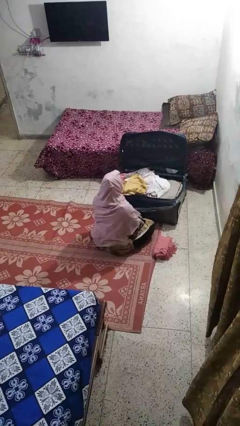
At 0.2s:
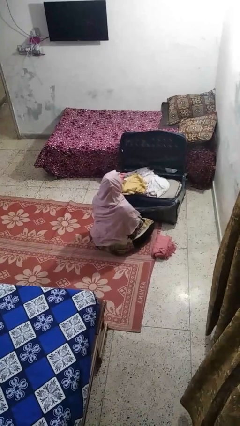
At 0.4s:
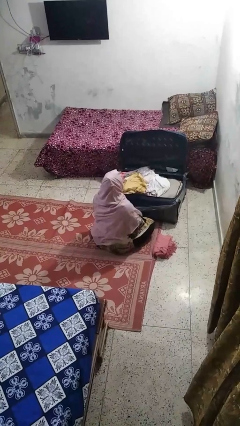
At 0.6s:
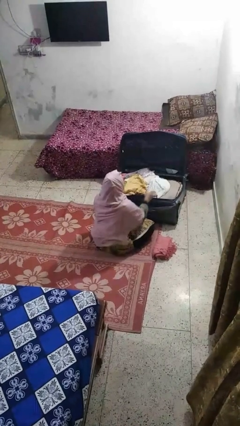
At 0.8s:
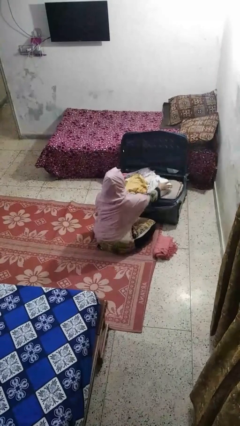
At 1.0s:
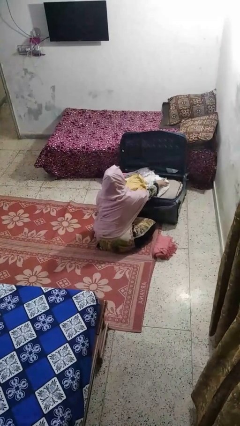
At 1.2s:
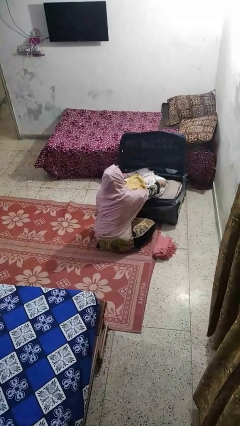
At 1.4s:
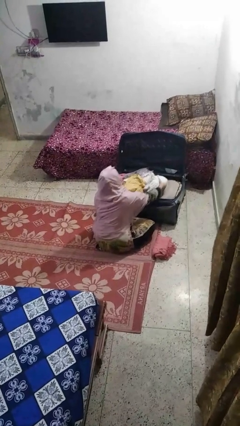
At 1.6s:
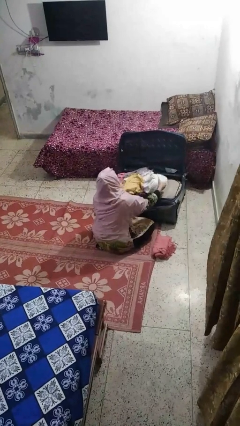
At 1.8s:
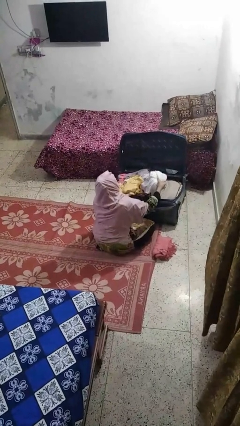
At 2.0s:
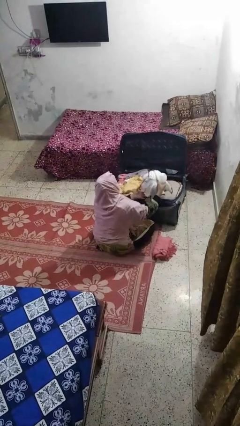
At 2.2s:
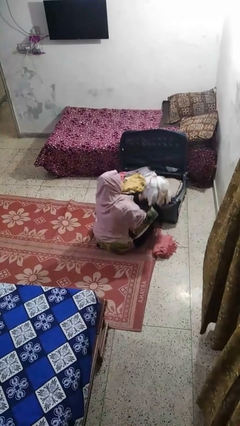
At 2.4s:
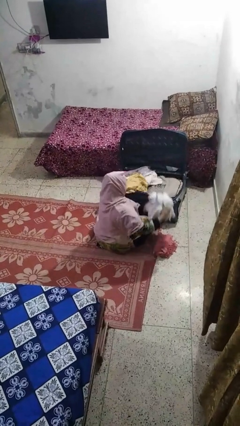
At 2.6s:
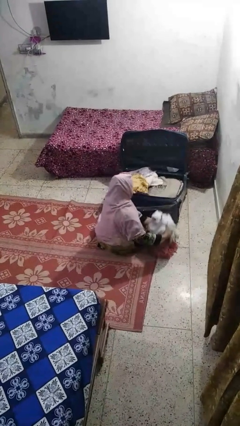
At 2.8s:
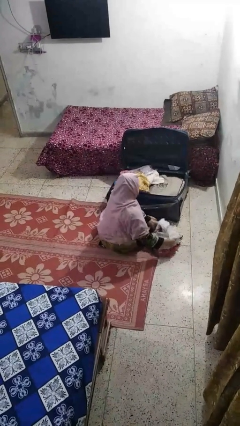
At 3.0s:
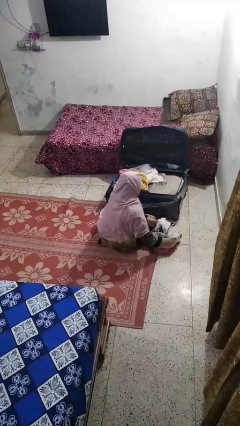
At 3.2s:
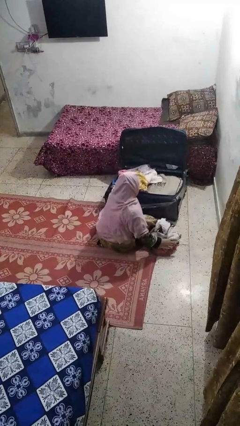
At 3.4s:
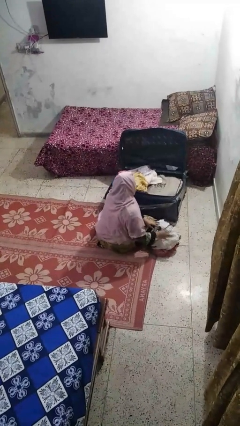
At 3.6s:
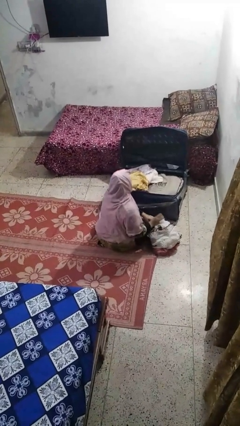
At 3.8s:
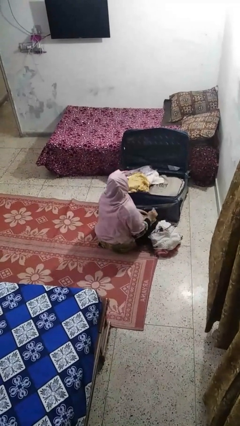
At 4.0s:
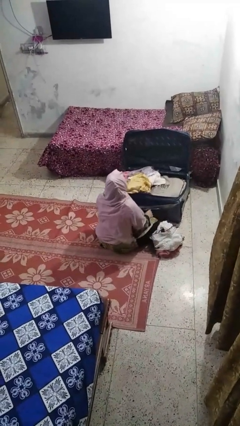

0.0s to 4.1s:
person unloads clothes from suitcase

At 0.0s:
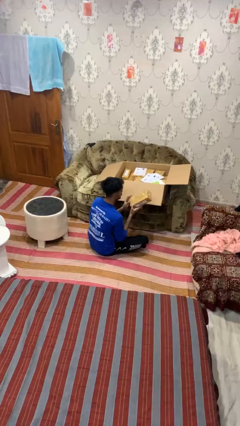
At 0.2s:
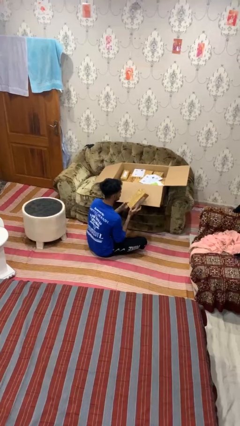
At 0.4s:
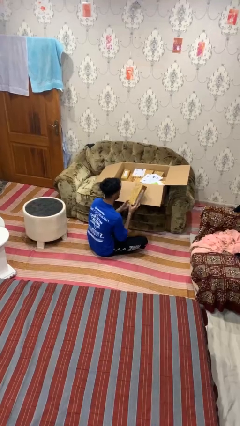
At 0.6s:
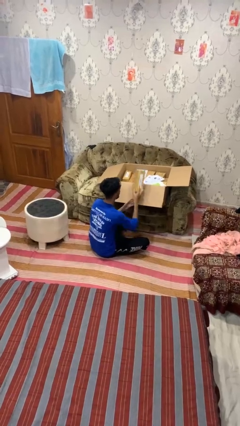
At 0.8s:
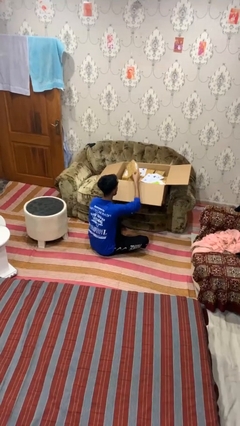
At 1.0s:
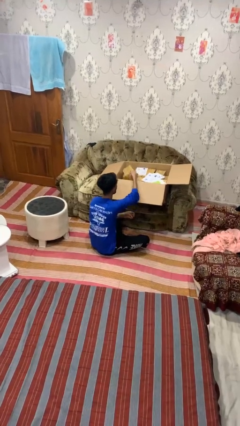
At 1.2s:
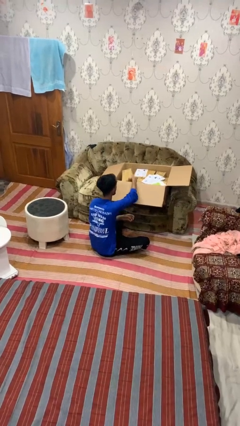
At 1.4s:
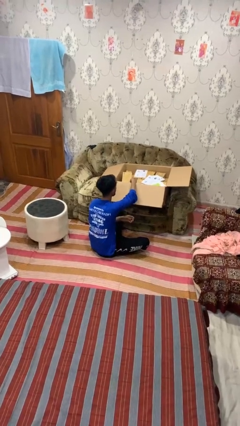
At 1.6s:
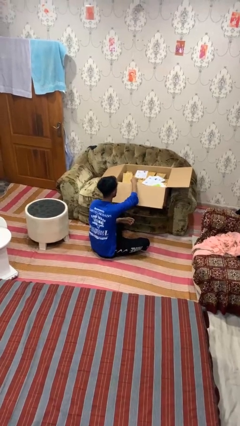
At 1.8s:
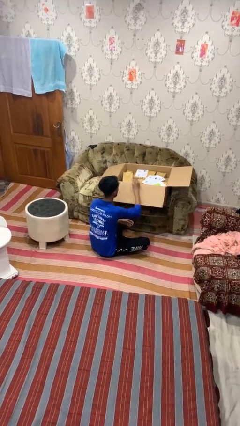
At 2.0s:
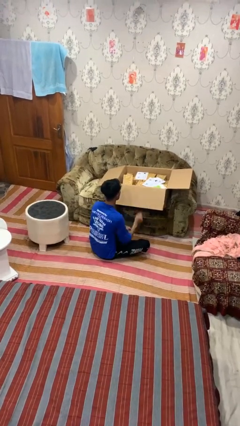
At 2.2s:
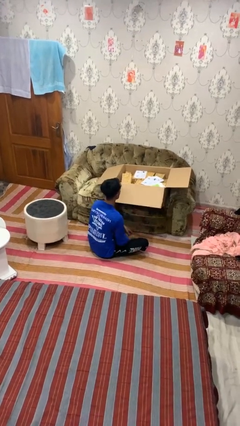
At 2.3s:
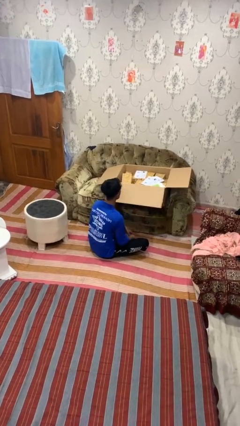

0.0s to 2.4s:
person puts object into box

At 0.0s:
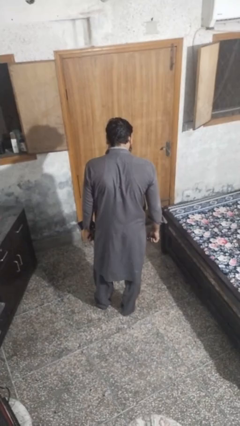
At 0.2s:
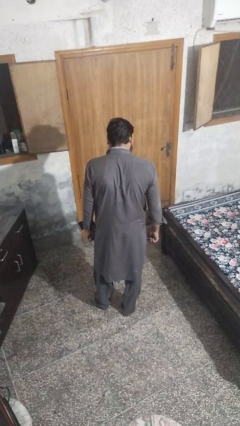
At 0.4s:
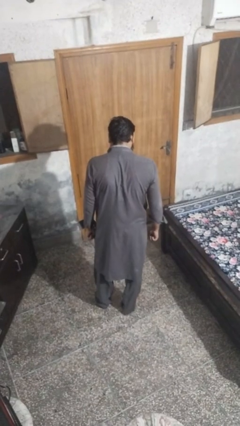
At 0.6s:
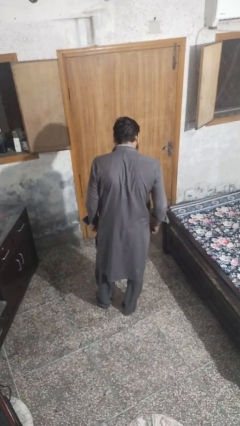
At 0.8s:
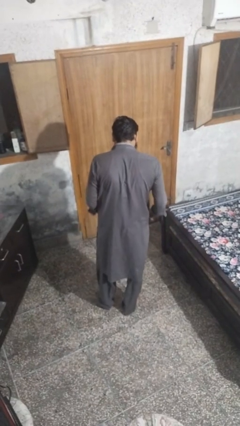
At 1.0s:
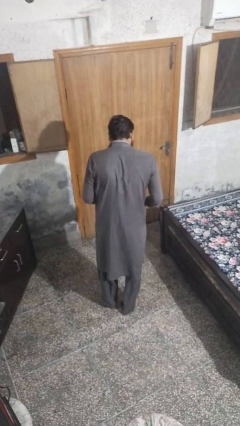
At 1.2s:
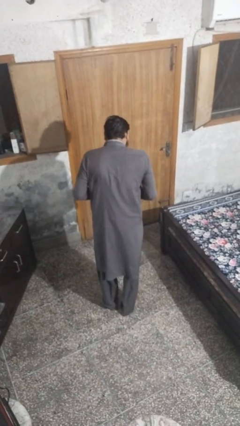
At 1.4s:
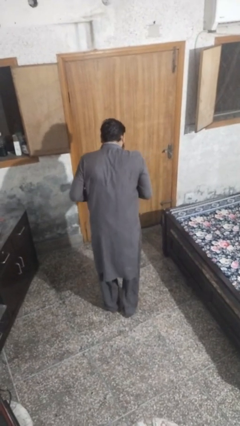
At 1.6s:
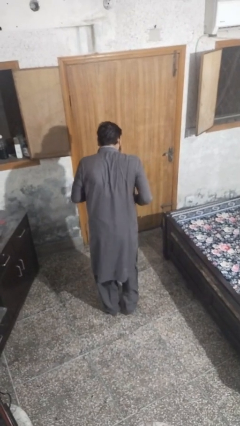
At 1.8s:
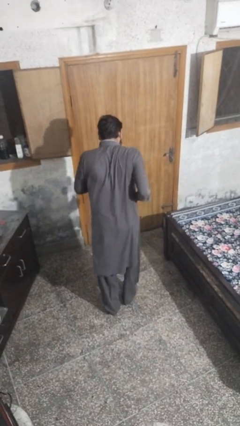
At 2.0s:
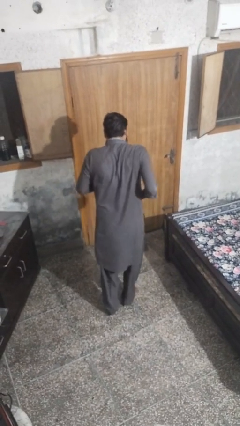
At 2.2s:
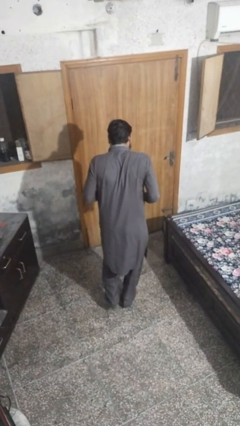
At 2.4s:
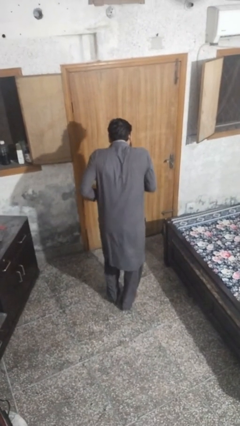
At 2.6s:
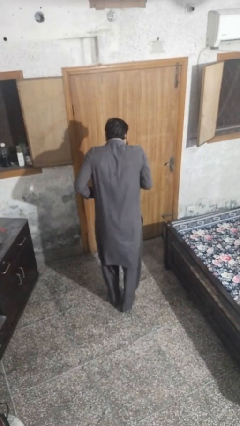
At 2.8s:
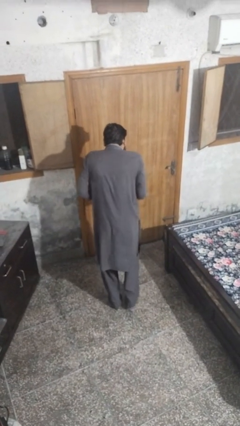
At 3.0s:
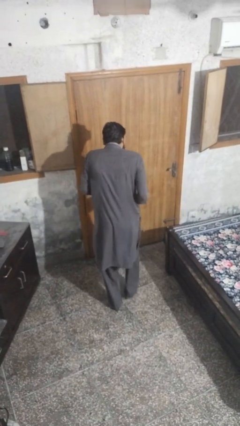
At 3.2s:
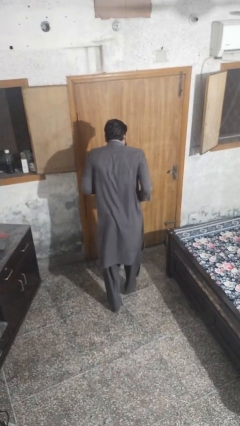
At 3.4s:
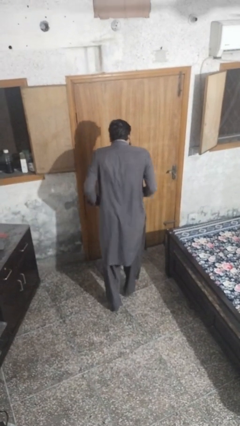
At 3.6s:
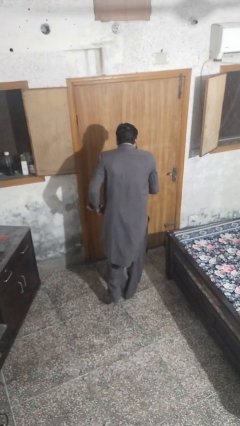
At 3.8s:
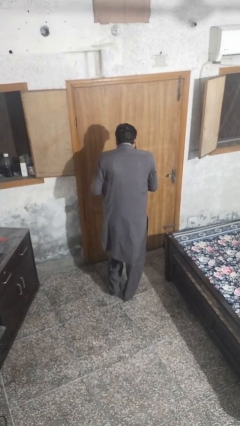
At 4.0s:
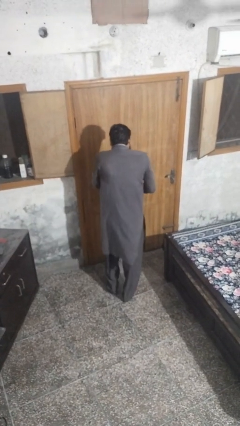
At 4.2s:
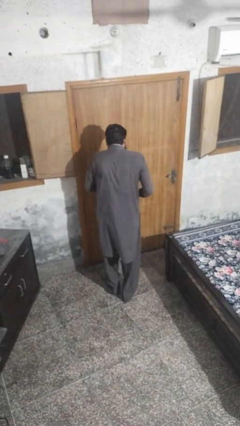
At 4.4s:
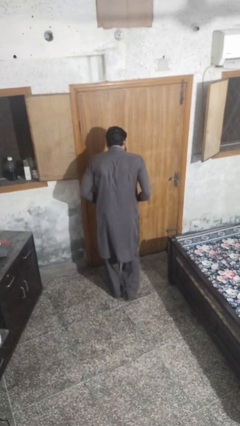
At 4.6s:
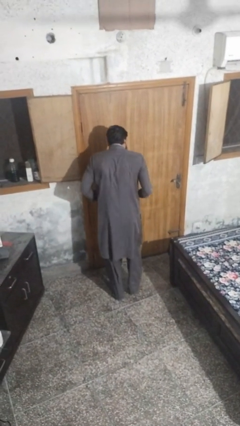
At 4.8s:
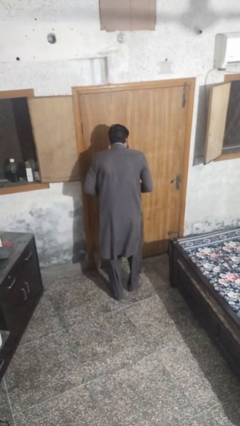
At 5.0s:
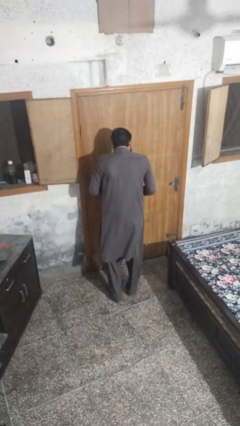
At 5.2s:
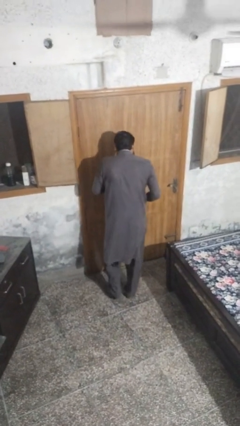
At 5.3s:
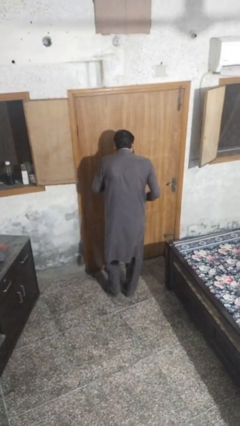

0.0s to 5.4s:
person walks tiptoe

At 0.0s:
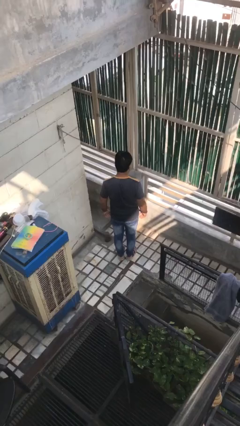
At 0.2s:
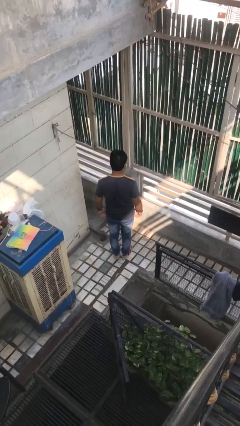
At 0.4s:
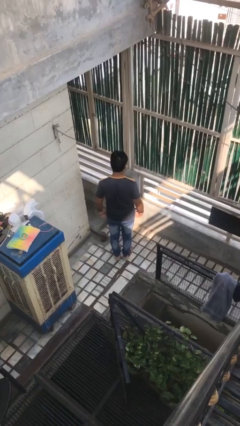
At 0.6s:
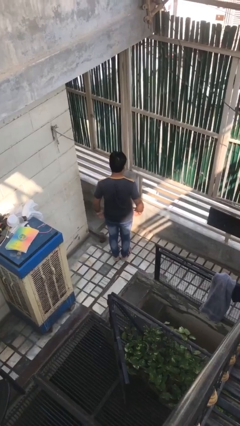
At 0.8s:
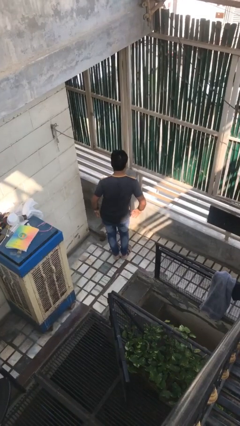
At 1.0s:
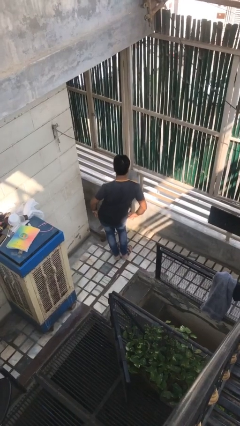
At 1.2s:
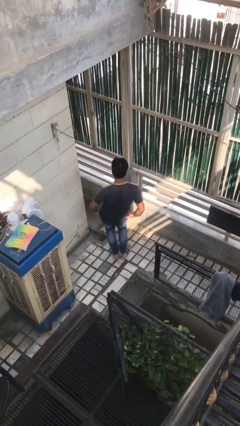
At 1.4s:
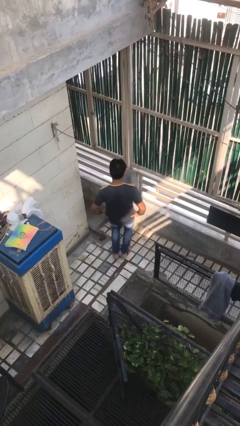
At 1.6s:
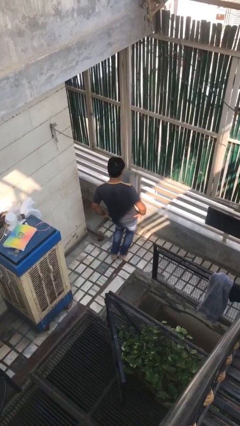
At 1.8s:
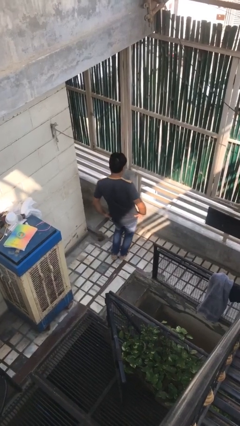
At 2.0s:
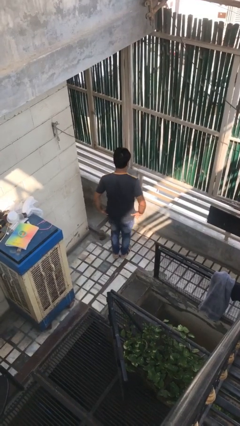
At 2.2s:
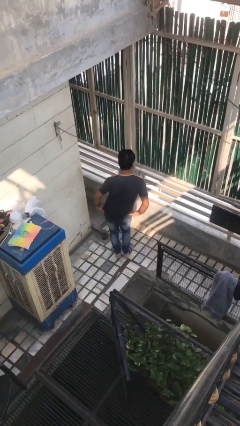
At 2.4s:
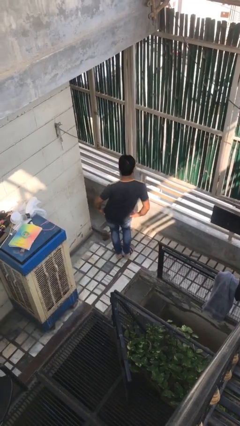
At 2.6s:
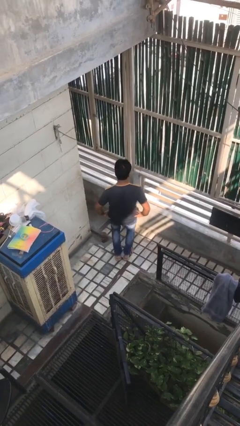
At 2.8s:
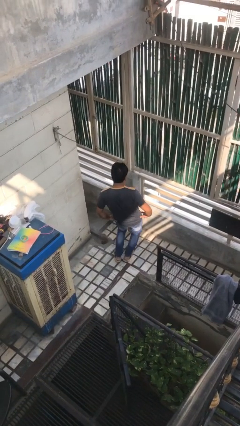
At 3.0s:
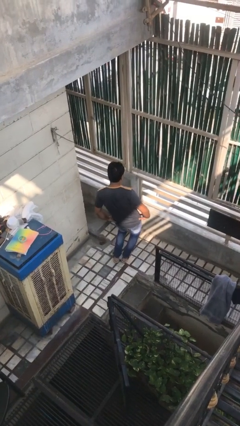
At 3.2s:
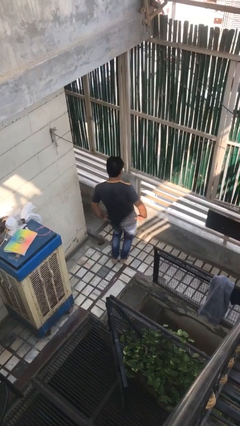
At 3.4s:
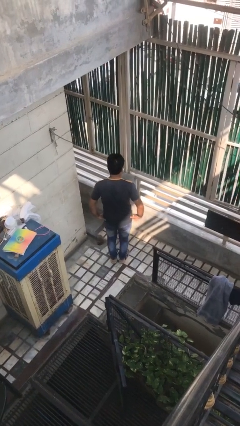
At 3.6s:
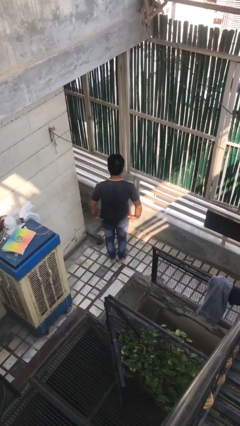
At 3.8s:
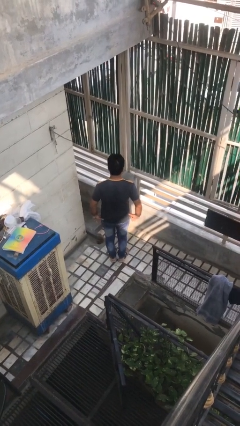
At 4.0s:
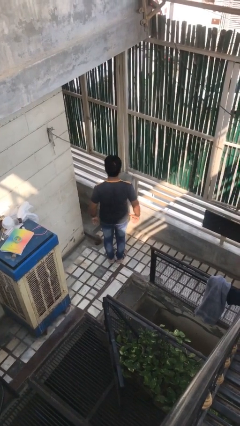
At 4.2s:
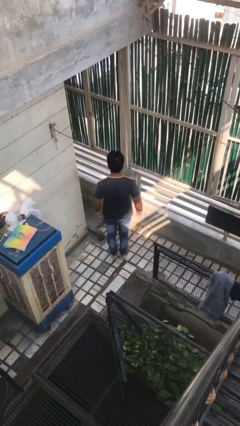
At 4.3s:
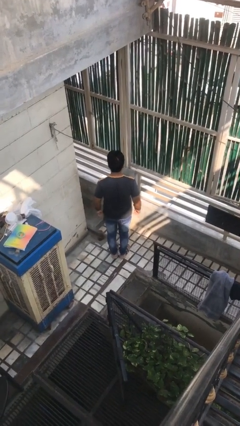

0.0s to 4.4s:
person wiggles hips

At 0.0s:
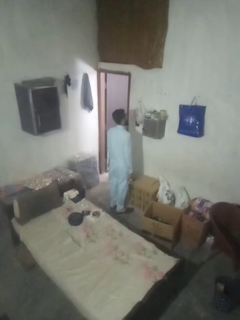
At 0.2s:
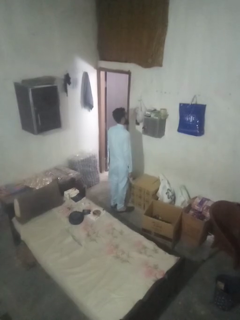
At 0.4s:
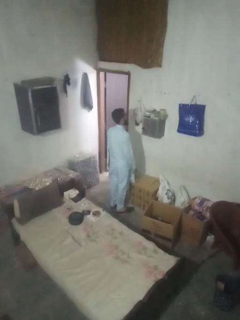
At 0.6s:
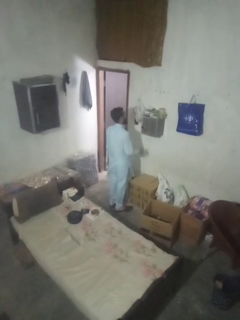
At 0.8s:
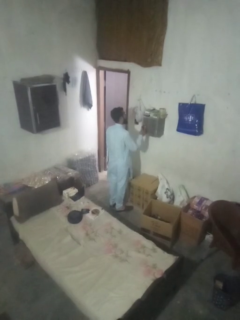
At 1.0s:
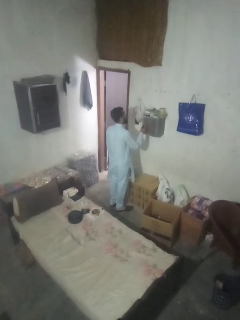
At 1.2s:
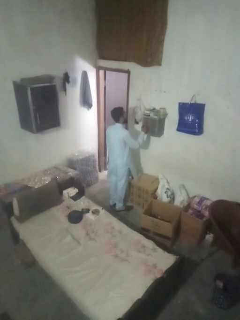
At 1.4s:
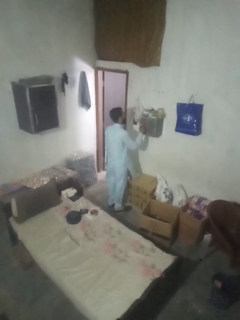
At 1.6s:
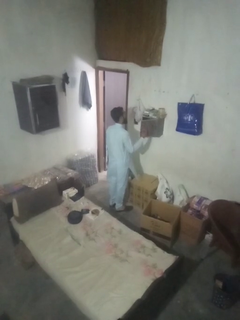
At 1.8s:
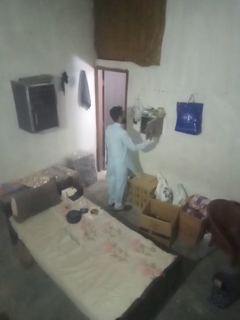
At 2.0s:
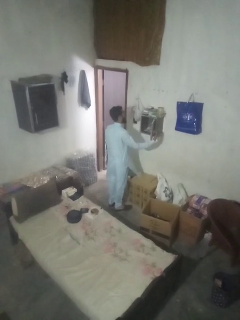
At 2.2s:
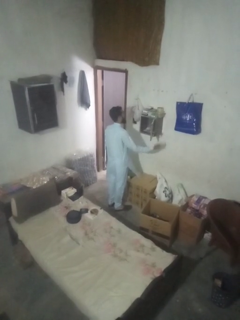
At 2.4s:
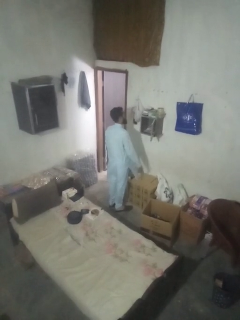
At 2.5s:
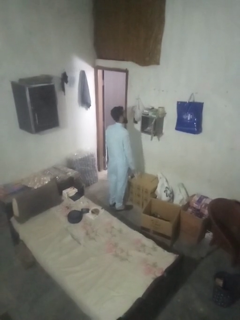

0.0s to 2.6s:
person opens mailbox
